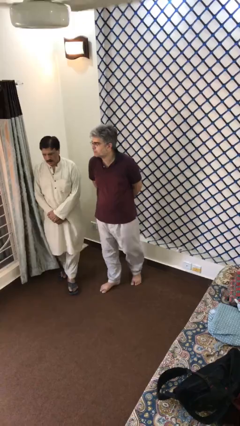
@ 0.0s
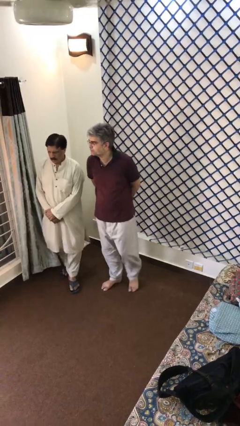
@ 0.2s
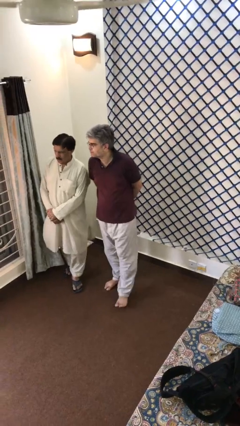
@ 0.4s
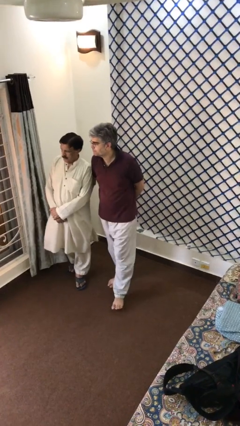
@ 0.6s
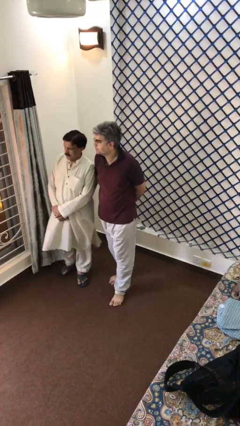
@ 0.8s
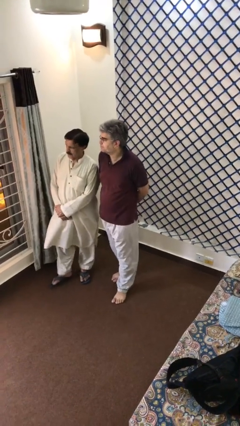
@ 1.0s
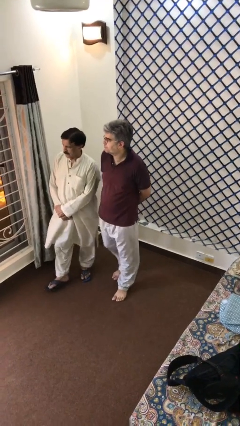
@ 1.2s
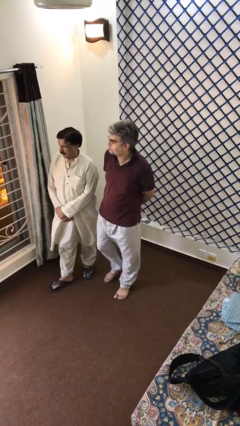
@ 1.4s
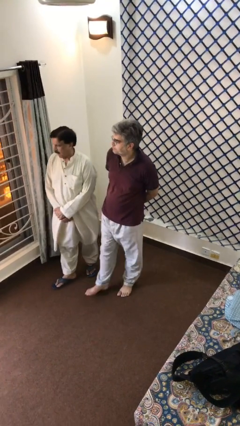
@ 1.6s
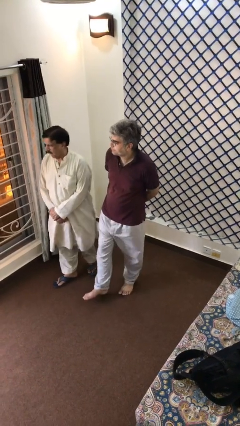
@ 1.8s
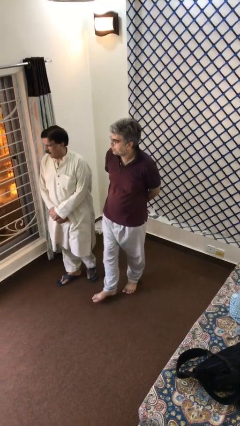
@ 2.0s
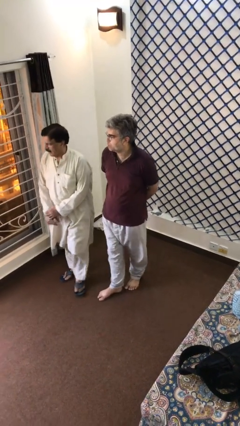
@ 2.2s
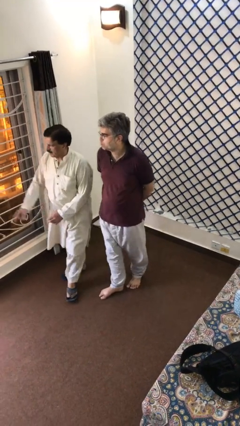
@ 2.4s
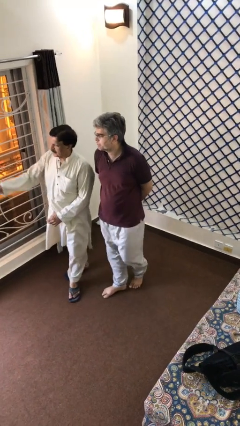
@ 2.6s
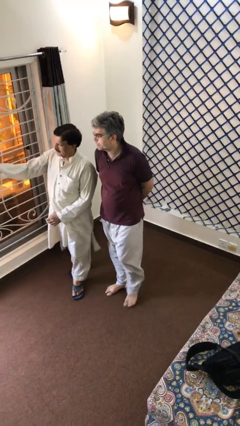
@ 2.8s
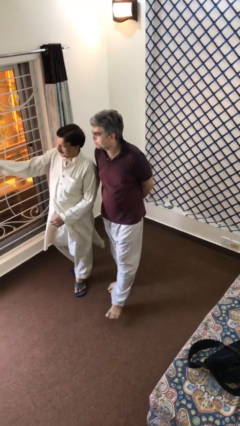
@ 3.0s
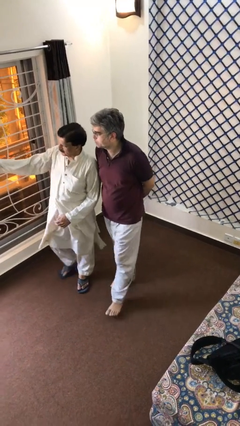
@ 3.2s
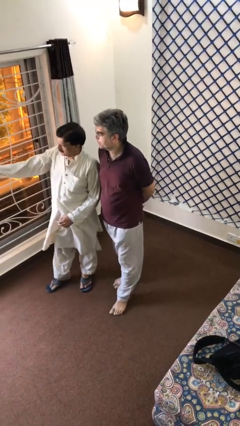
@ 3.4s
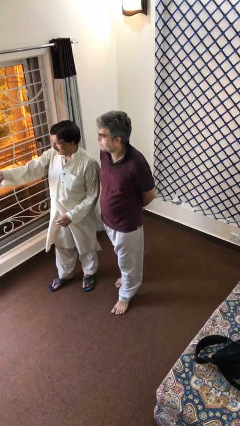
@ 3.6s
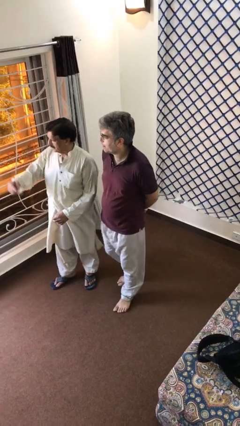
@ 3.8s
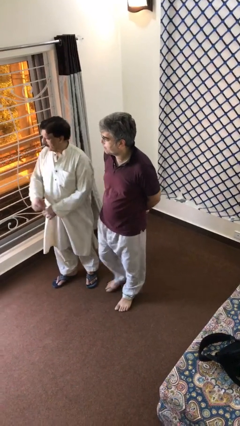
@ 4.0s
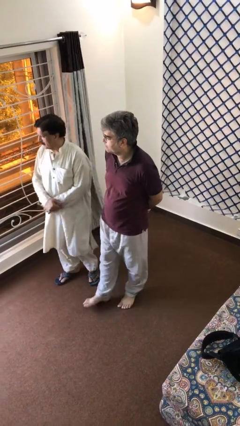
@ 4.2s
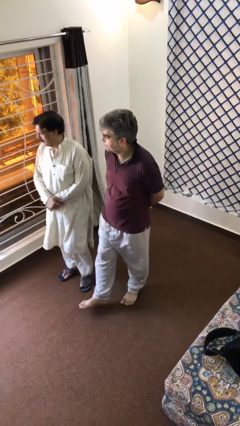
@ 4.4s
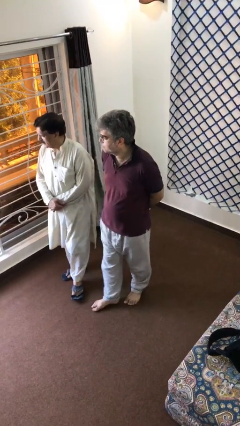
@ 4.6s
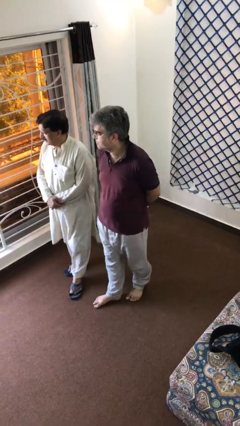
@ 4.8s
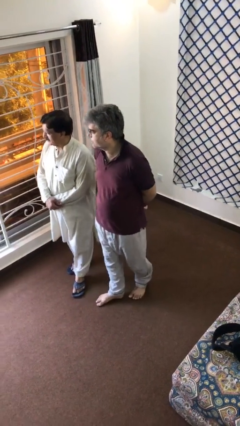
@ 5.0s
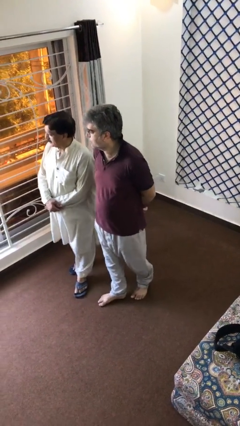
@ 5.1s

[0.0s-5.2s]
person talks to person

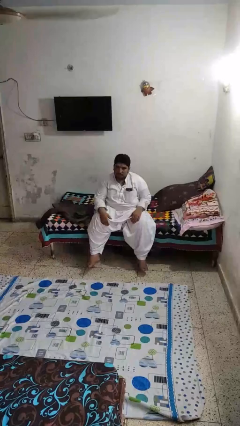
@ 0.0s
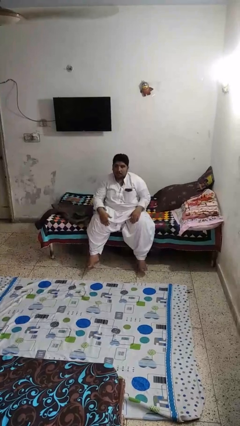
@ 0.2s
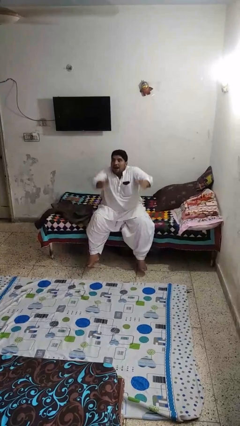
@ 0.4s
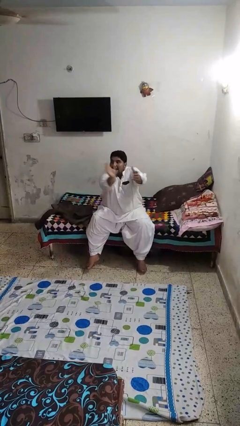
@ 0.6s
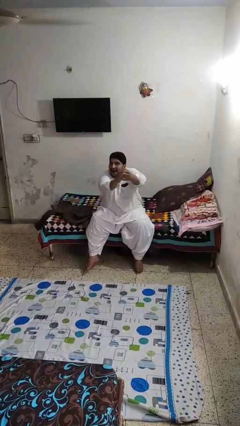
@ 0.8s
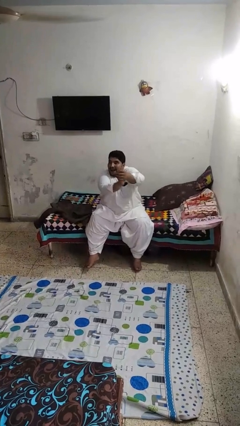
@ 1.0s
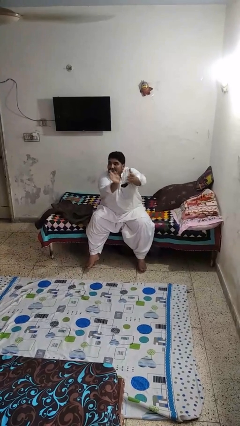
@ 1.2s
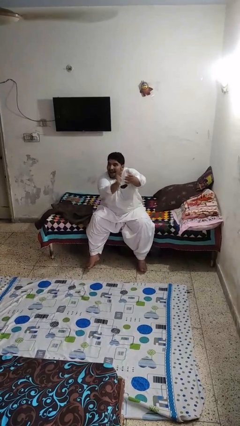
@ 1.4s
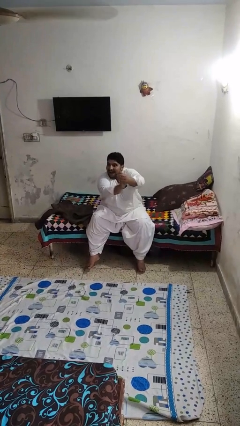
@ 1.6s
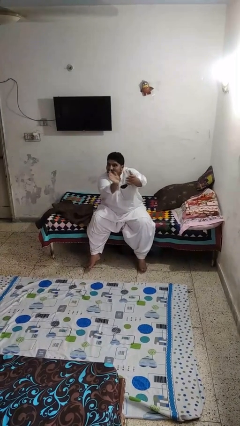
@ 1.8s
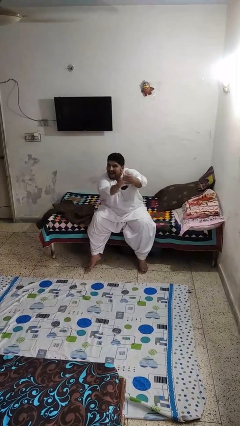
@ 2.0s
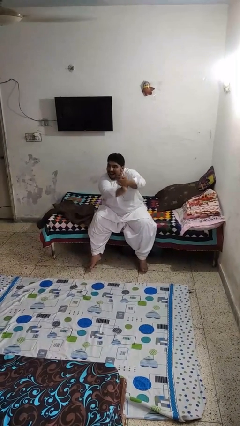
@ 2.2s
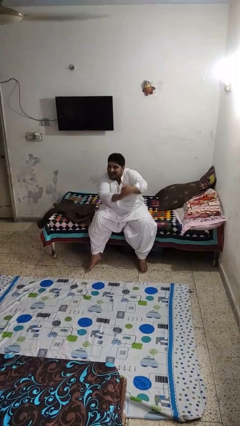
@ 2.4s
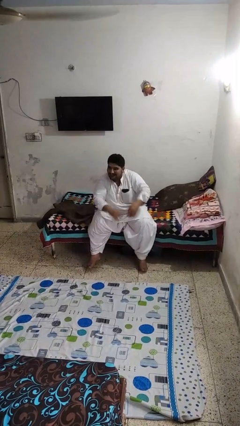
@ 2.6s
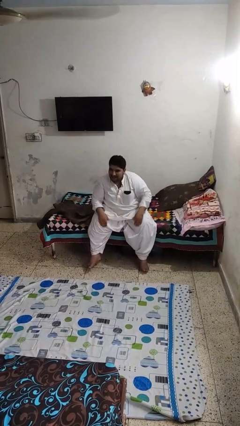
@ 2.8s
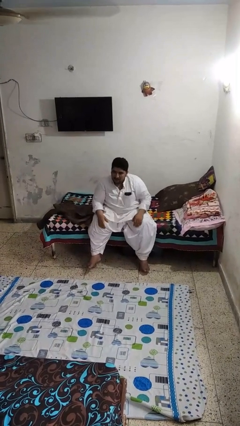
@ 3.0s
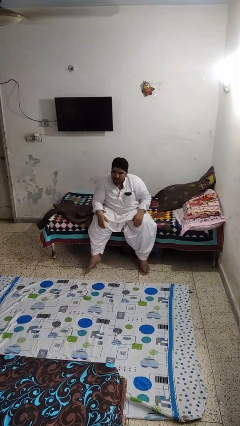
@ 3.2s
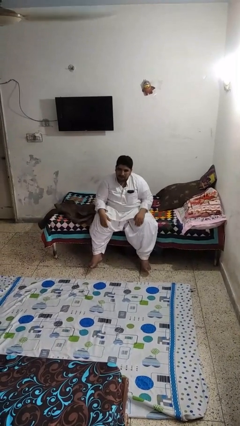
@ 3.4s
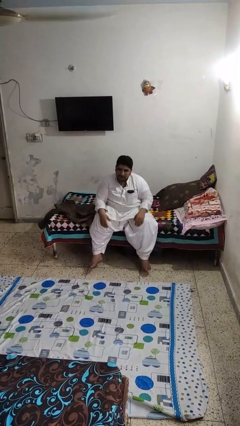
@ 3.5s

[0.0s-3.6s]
person claps hands

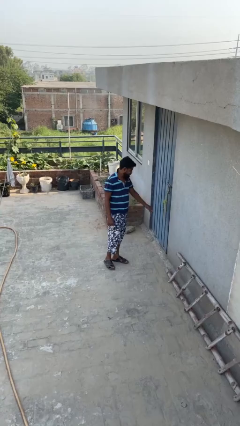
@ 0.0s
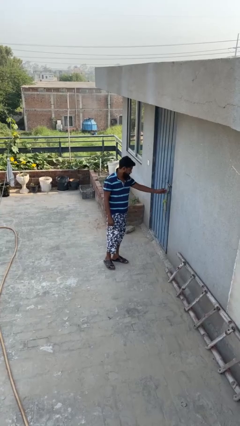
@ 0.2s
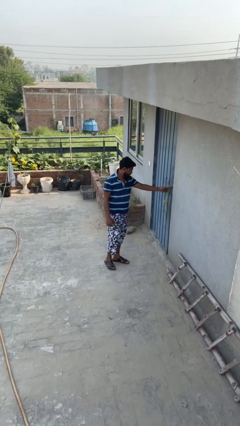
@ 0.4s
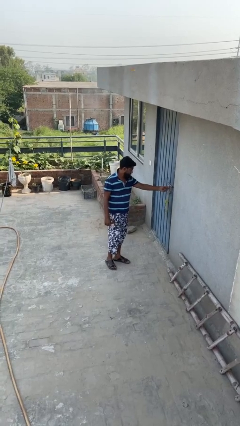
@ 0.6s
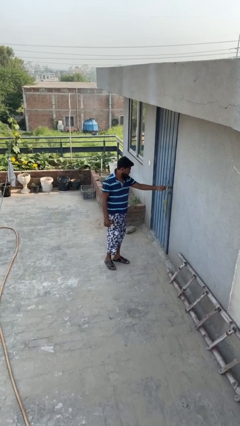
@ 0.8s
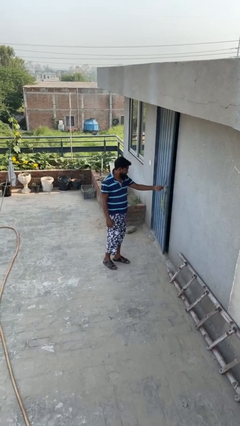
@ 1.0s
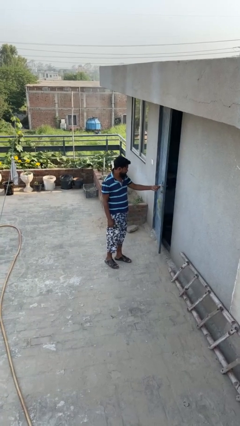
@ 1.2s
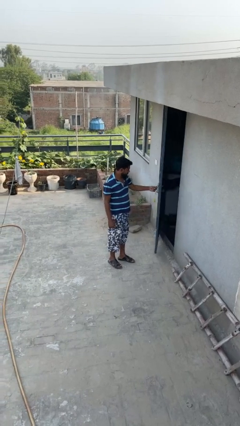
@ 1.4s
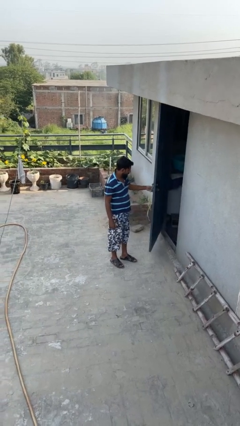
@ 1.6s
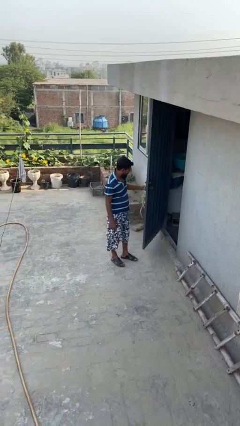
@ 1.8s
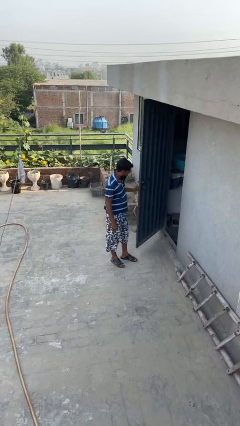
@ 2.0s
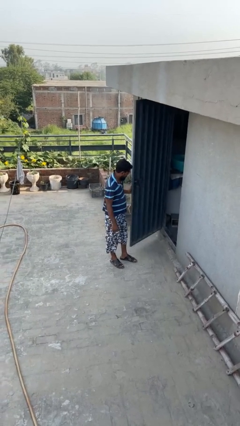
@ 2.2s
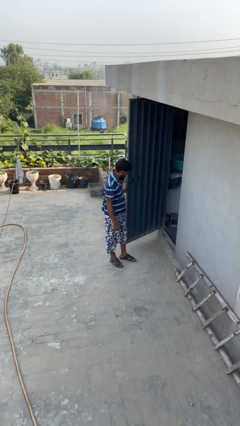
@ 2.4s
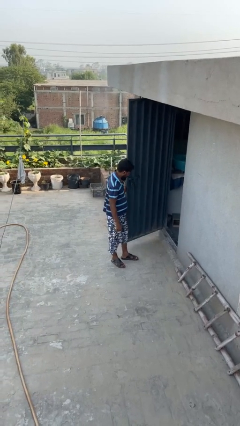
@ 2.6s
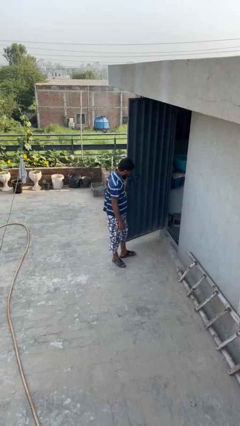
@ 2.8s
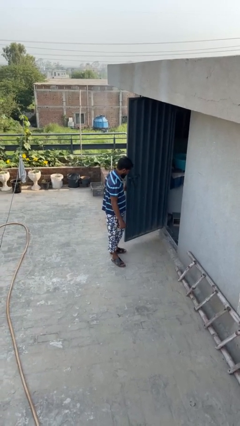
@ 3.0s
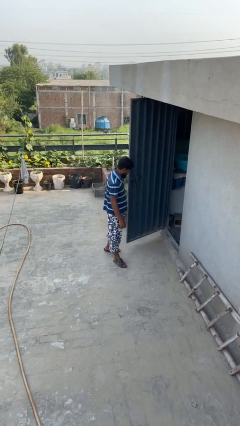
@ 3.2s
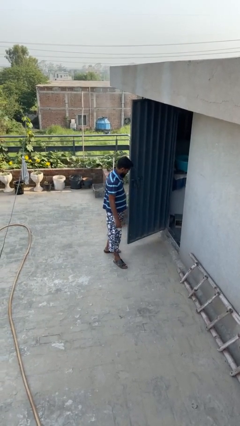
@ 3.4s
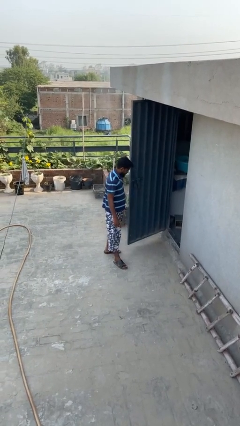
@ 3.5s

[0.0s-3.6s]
person opens facility door

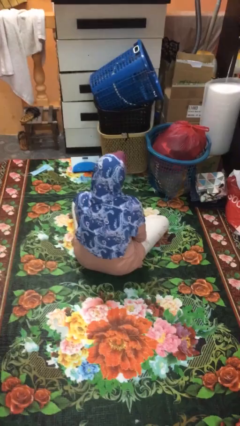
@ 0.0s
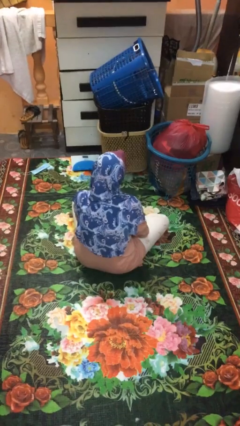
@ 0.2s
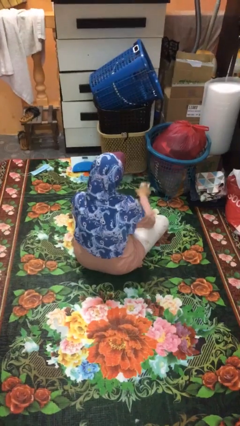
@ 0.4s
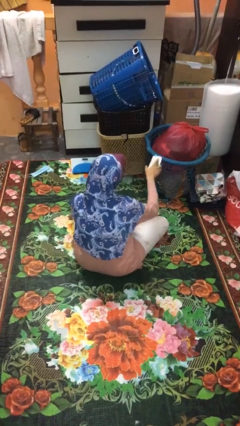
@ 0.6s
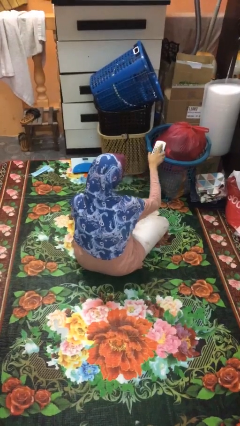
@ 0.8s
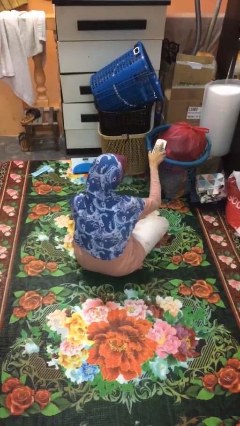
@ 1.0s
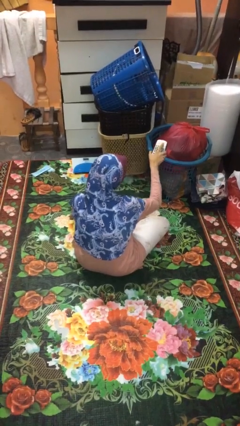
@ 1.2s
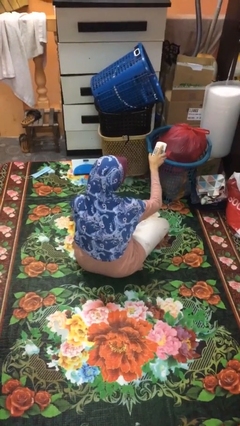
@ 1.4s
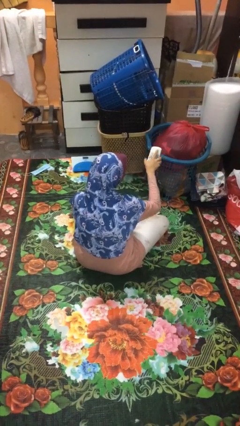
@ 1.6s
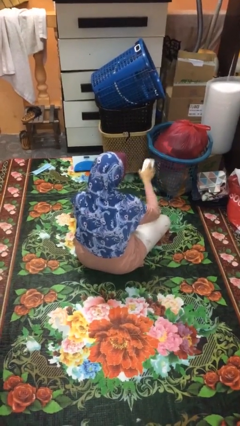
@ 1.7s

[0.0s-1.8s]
person uses television remote

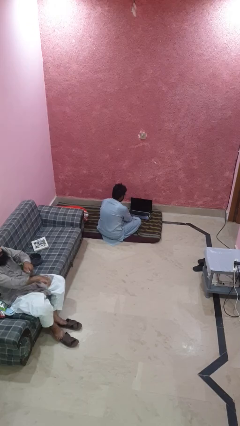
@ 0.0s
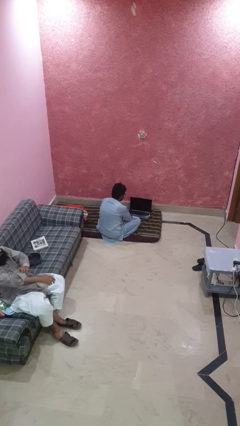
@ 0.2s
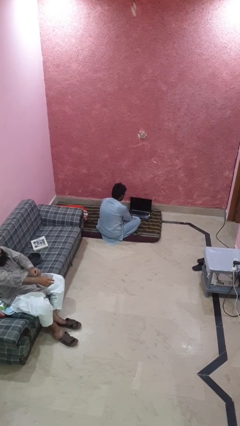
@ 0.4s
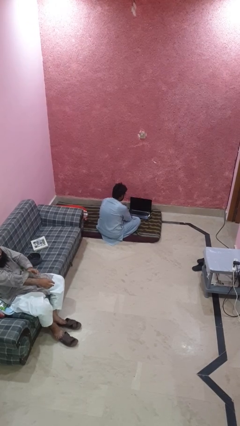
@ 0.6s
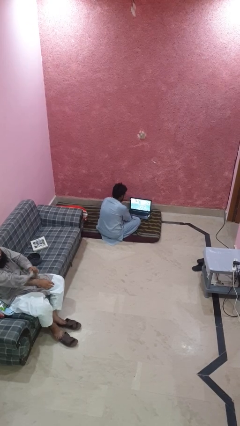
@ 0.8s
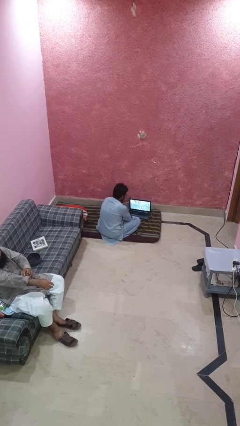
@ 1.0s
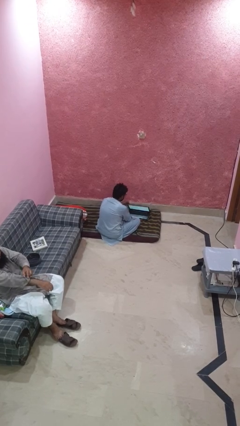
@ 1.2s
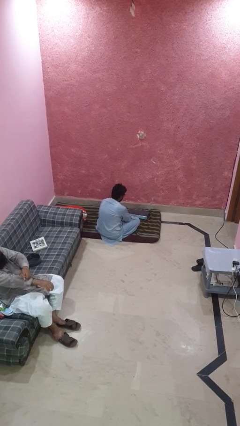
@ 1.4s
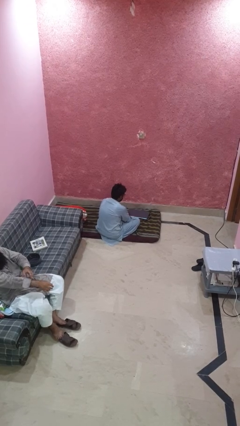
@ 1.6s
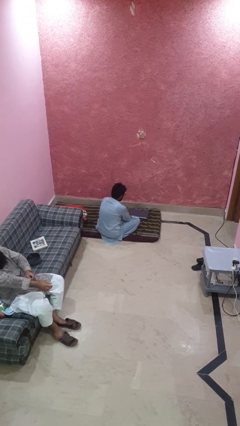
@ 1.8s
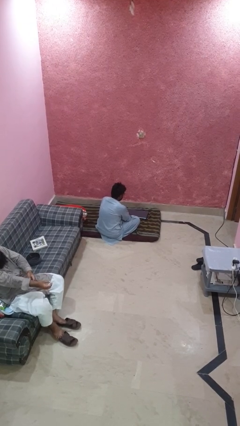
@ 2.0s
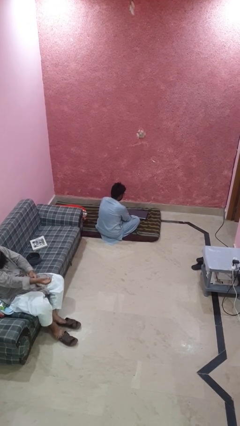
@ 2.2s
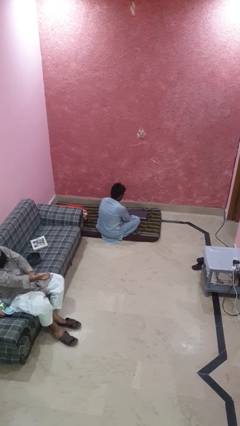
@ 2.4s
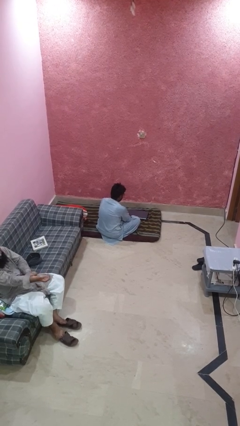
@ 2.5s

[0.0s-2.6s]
person closes laptop

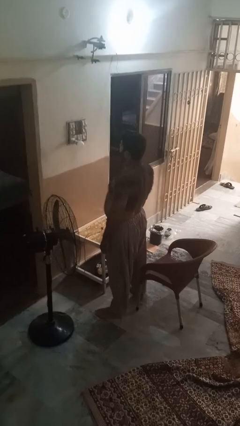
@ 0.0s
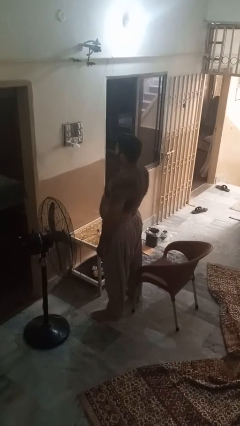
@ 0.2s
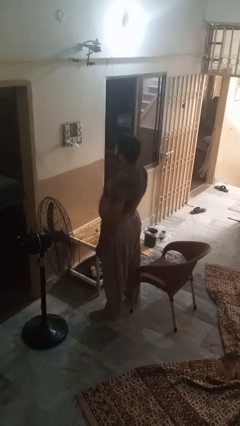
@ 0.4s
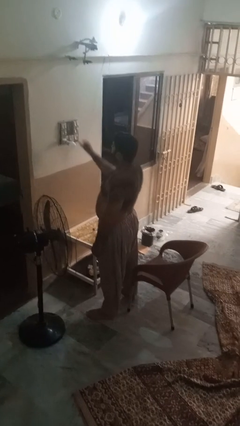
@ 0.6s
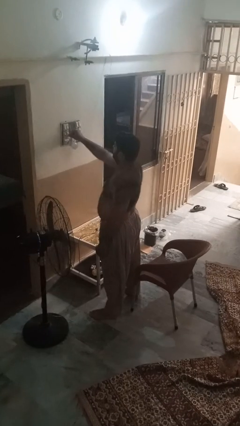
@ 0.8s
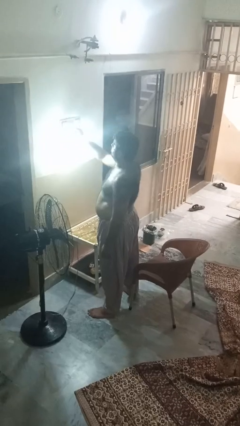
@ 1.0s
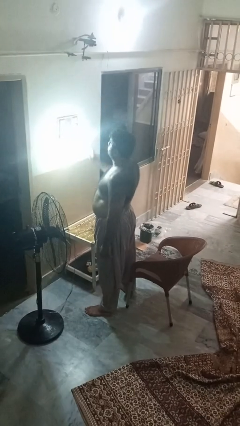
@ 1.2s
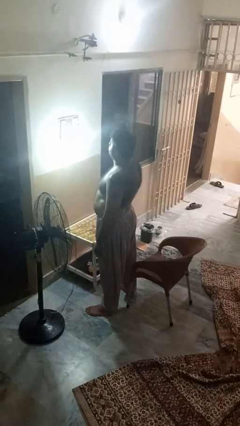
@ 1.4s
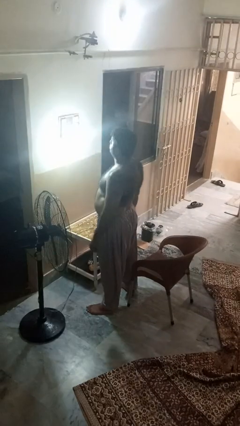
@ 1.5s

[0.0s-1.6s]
person turns on lamp
